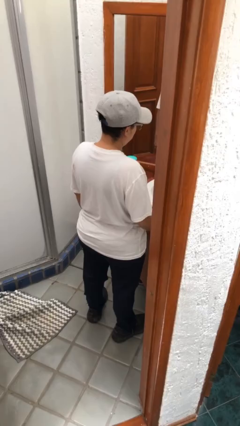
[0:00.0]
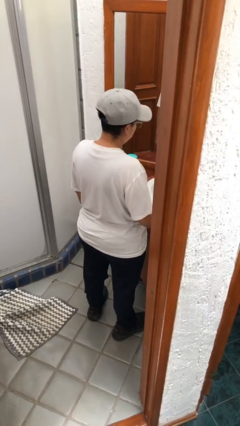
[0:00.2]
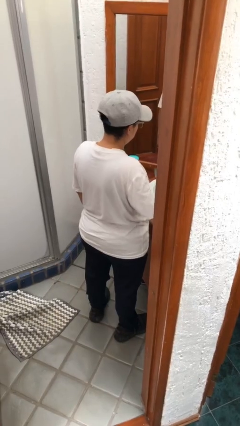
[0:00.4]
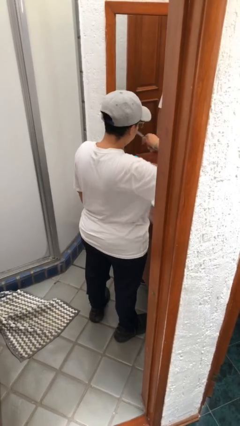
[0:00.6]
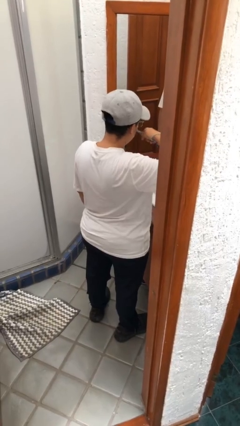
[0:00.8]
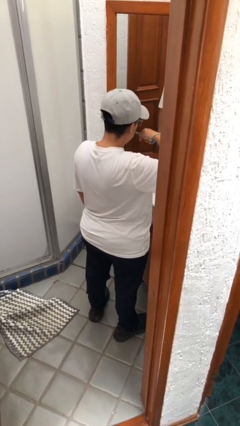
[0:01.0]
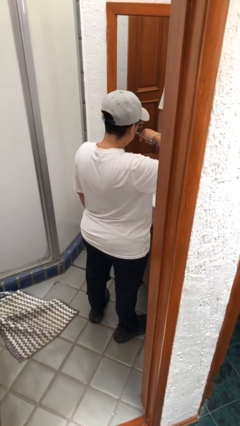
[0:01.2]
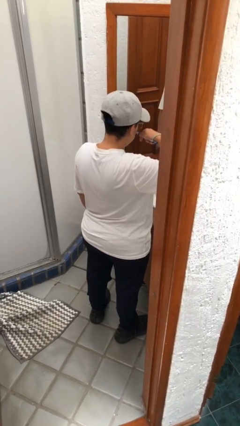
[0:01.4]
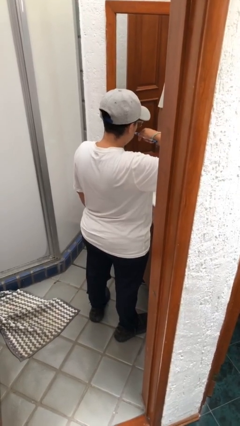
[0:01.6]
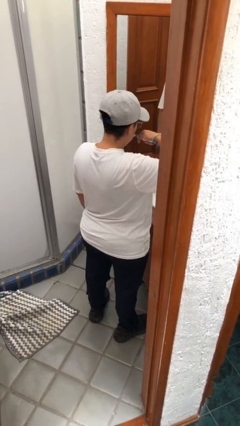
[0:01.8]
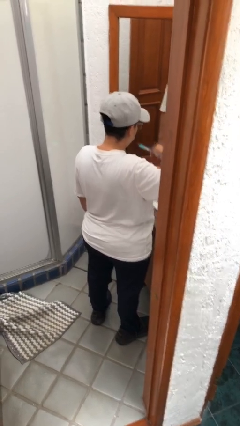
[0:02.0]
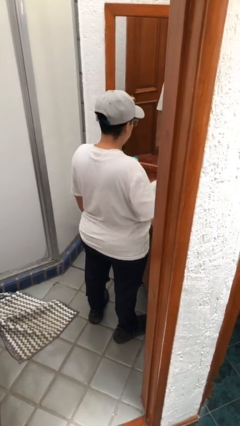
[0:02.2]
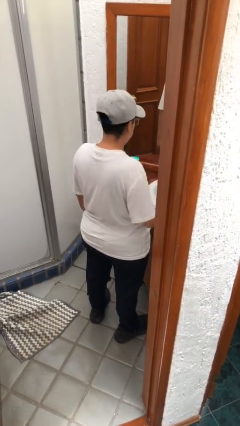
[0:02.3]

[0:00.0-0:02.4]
person brushes teeth

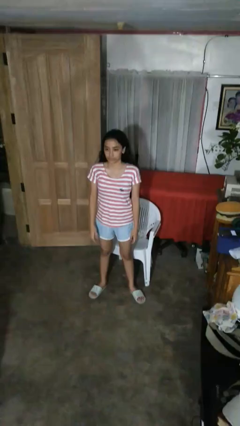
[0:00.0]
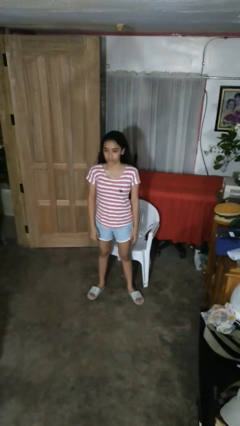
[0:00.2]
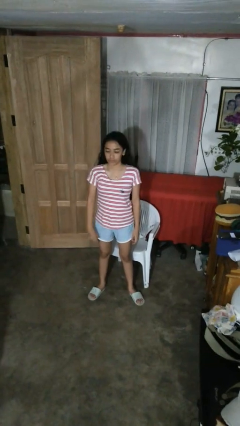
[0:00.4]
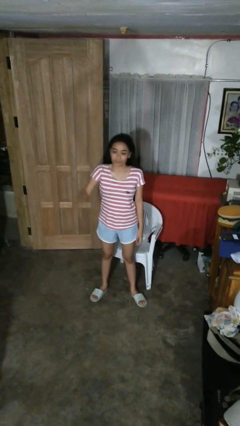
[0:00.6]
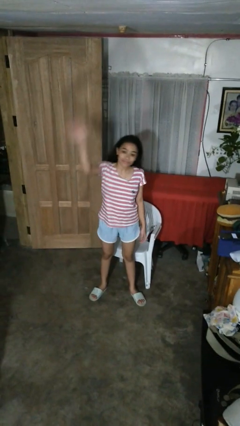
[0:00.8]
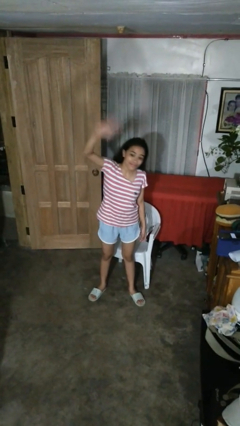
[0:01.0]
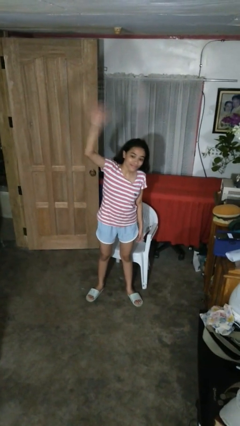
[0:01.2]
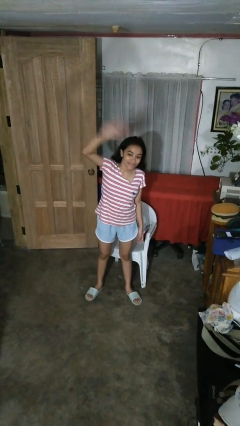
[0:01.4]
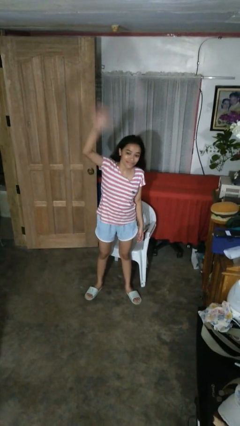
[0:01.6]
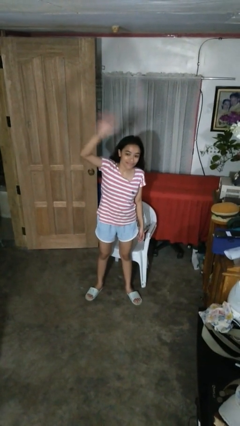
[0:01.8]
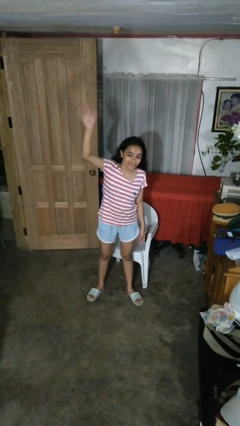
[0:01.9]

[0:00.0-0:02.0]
person waves at person

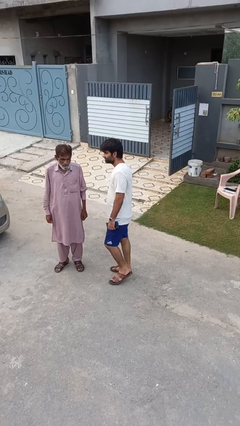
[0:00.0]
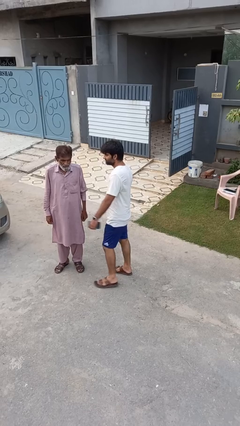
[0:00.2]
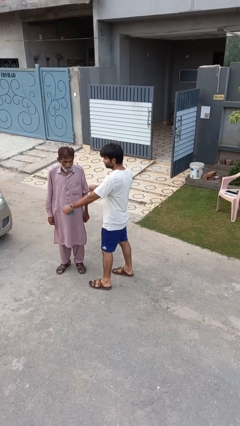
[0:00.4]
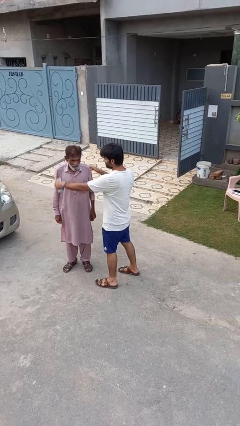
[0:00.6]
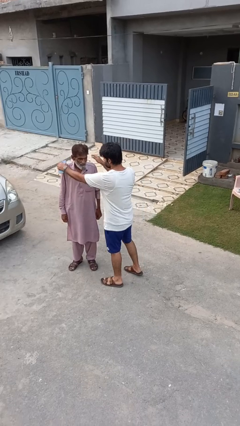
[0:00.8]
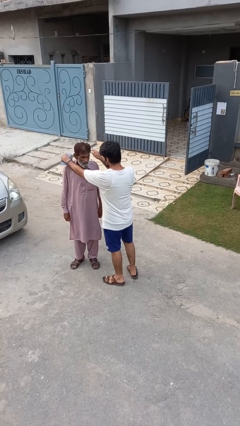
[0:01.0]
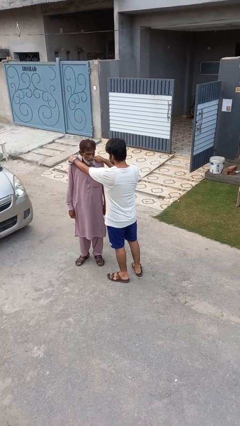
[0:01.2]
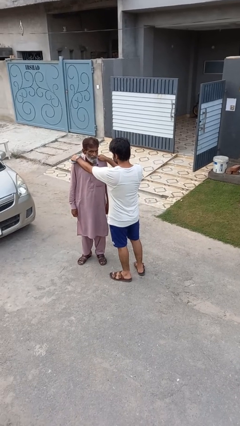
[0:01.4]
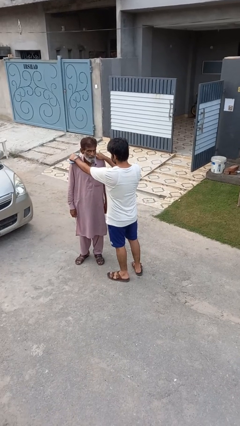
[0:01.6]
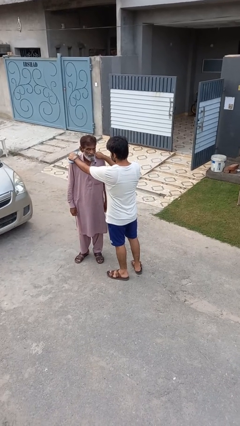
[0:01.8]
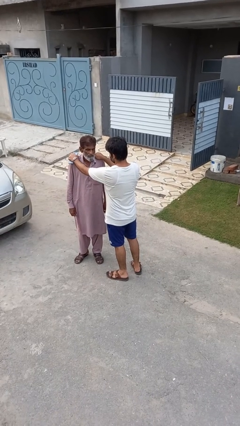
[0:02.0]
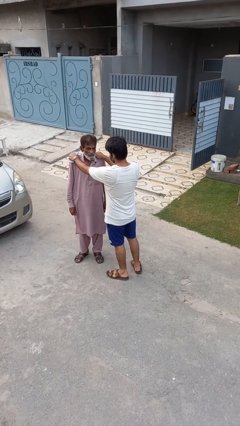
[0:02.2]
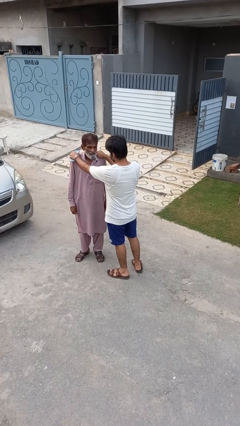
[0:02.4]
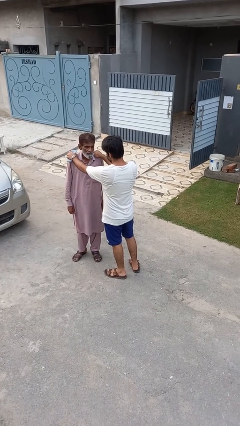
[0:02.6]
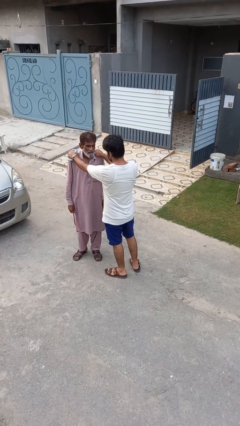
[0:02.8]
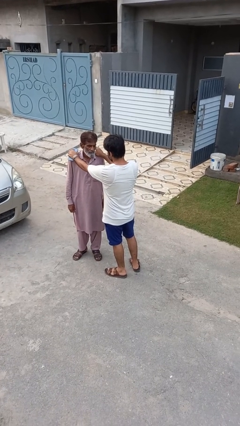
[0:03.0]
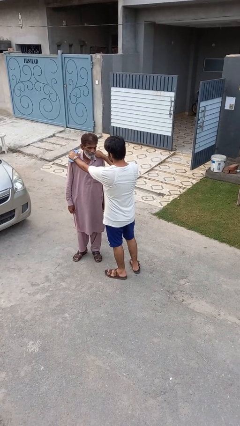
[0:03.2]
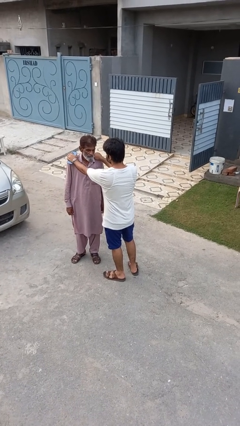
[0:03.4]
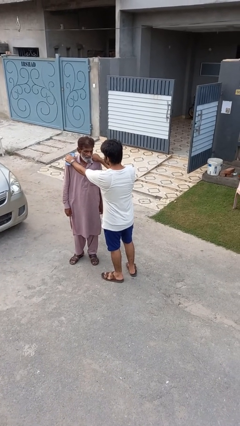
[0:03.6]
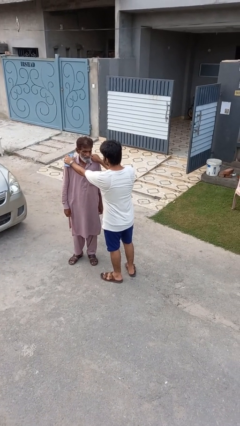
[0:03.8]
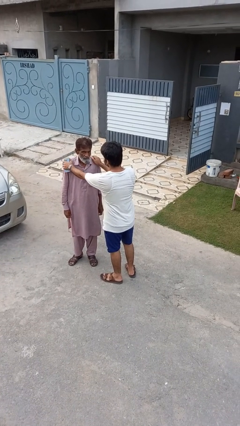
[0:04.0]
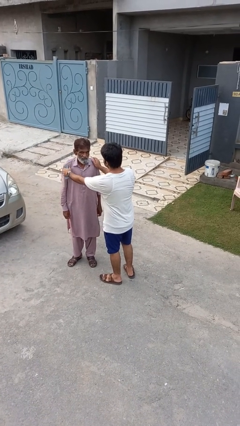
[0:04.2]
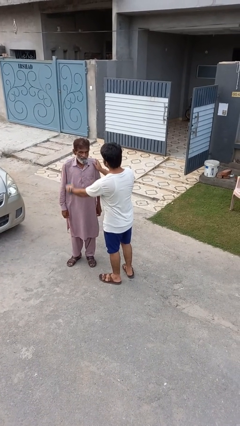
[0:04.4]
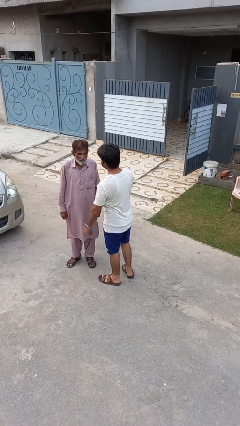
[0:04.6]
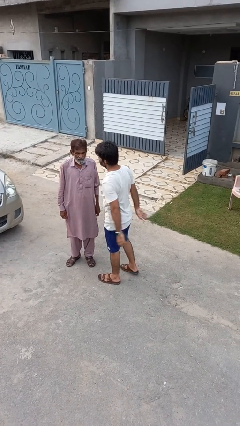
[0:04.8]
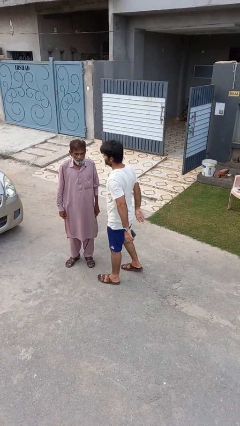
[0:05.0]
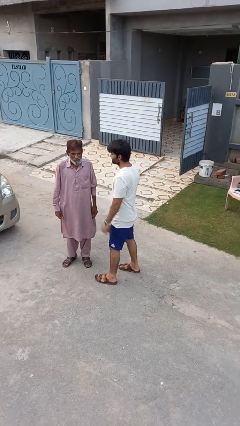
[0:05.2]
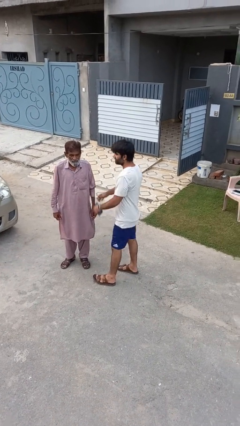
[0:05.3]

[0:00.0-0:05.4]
person pounds shoulders of person

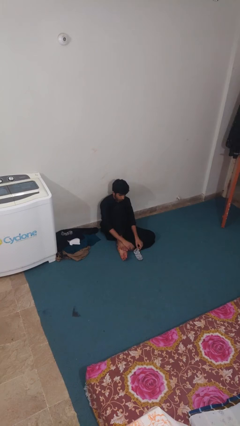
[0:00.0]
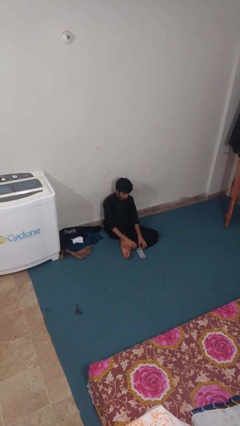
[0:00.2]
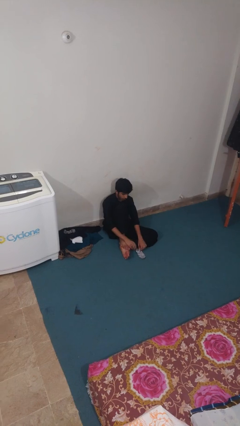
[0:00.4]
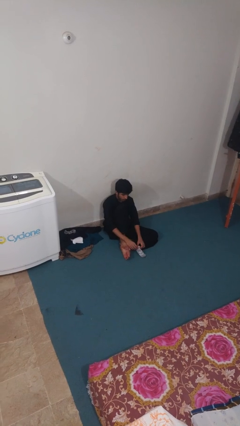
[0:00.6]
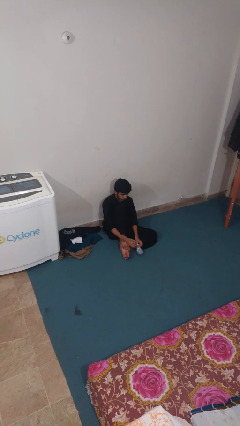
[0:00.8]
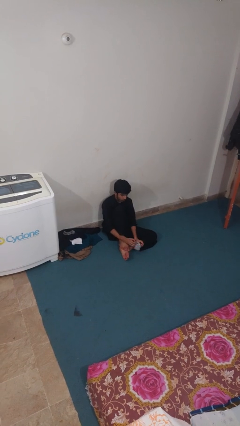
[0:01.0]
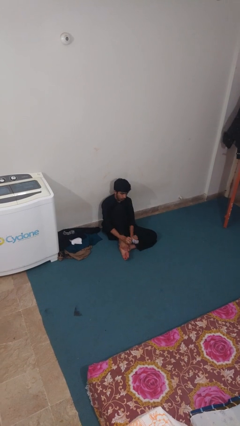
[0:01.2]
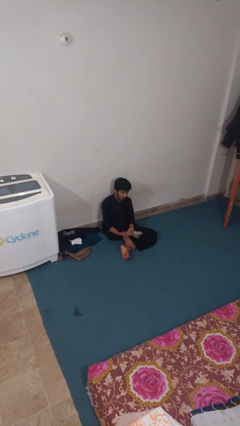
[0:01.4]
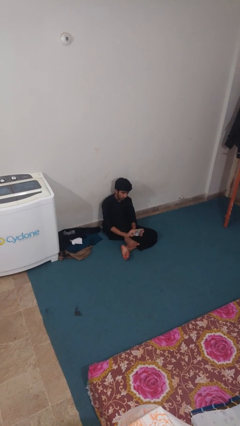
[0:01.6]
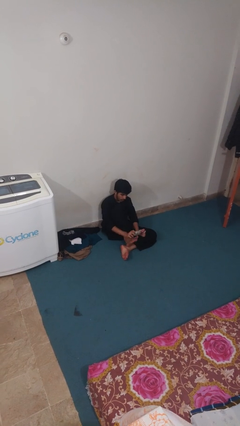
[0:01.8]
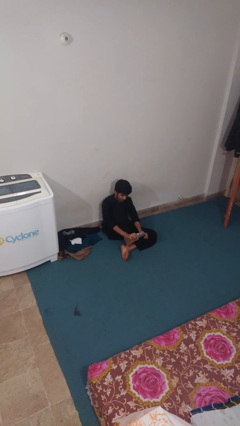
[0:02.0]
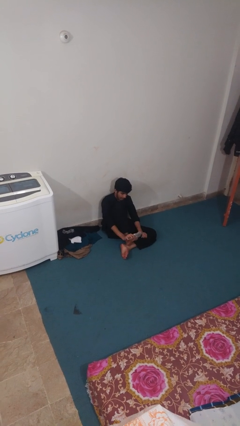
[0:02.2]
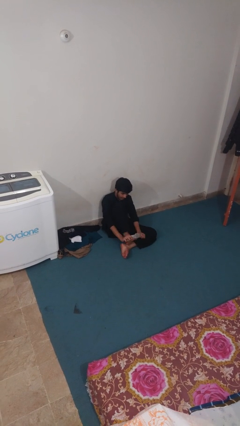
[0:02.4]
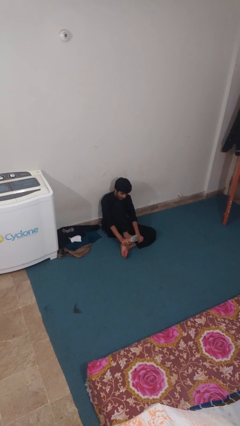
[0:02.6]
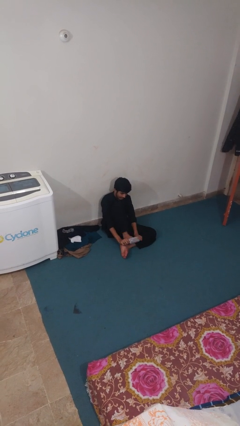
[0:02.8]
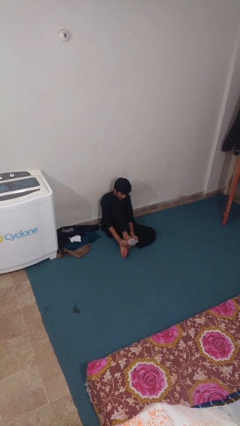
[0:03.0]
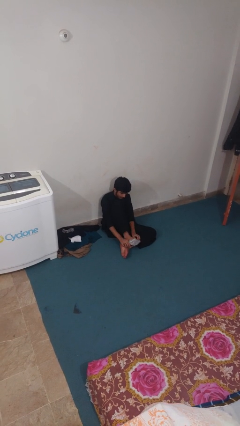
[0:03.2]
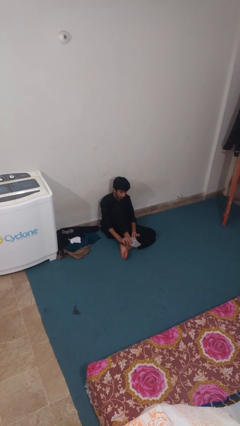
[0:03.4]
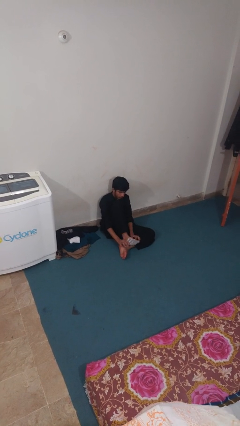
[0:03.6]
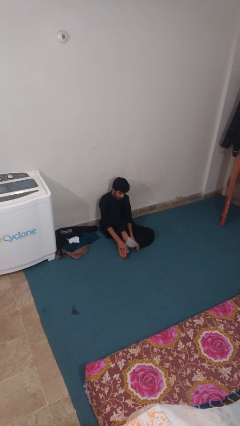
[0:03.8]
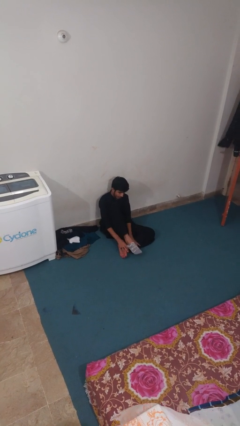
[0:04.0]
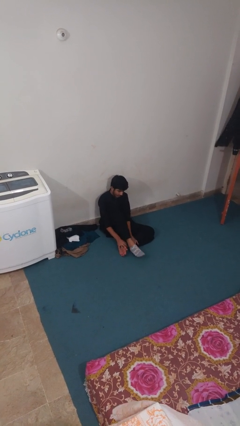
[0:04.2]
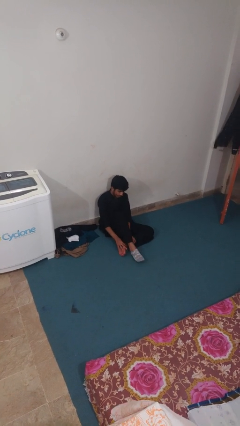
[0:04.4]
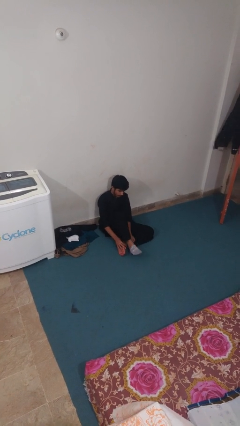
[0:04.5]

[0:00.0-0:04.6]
person puts on socks

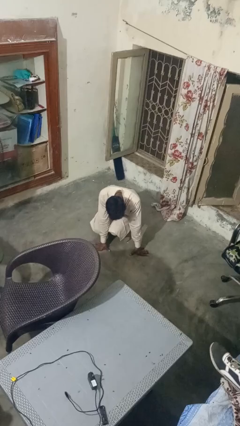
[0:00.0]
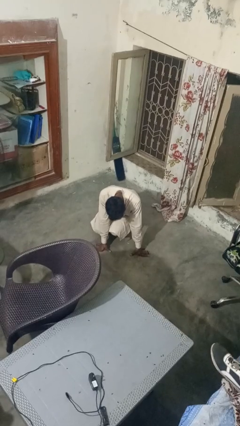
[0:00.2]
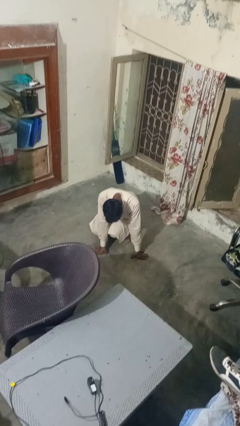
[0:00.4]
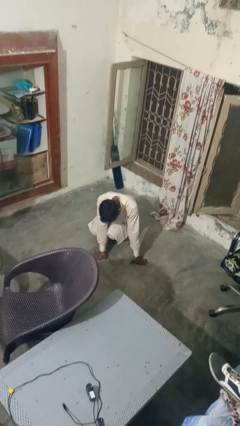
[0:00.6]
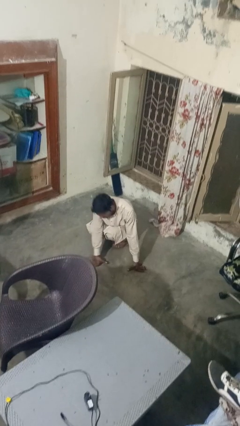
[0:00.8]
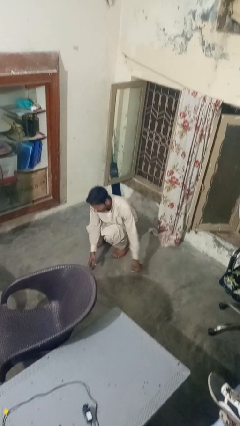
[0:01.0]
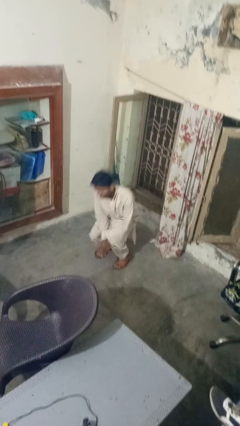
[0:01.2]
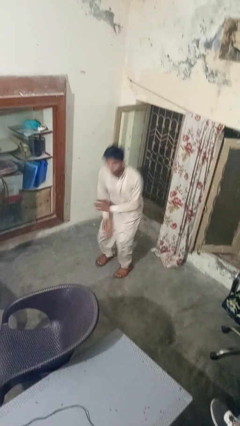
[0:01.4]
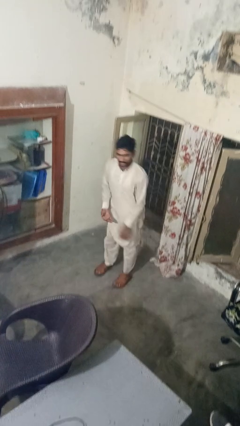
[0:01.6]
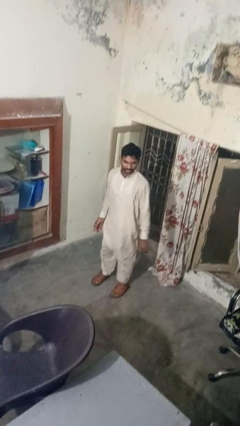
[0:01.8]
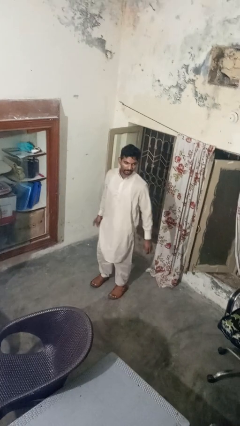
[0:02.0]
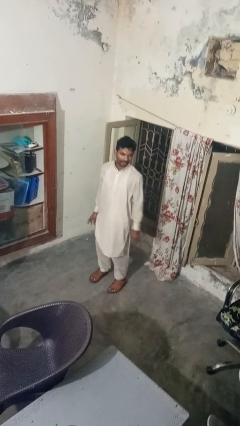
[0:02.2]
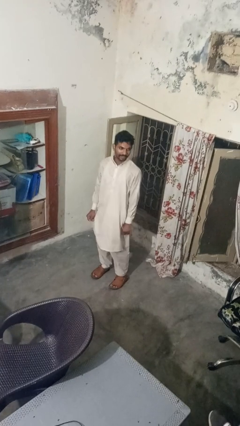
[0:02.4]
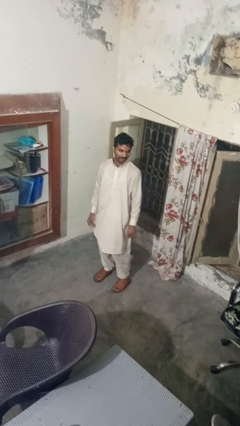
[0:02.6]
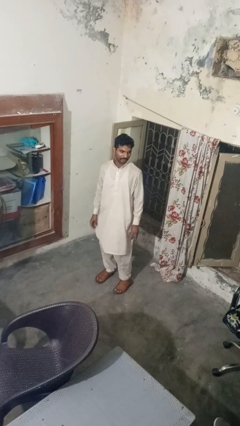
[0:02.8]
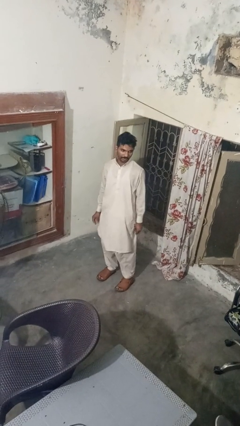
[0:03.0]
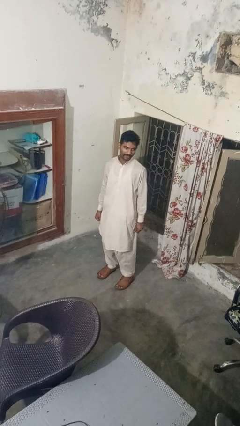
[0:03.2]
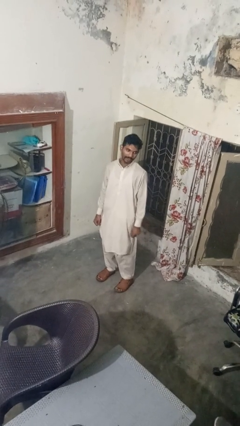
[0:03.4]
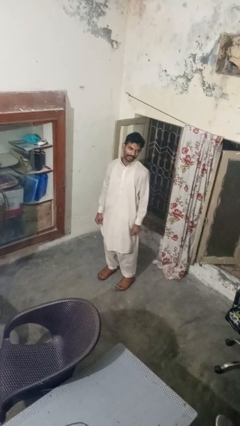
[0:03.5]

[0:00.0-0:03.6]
person stands up from floor

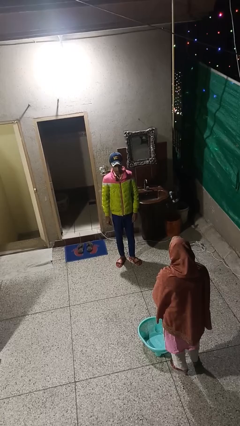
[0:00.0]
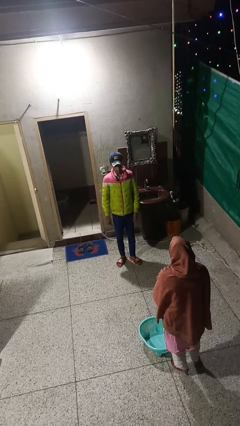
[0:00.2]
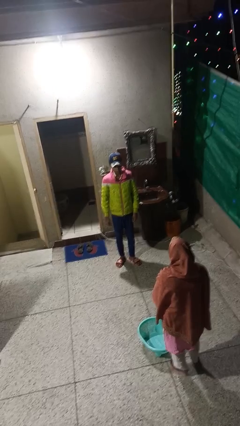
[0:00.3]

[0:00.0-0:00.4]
person kicks object to person
